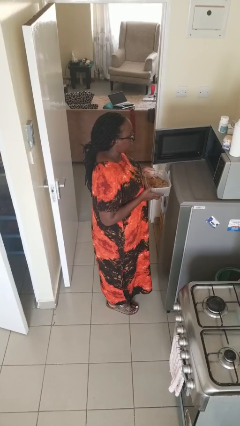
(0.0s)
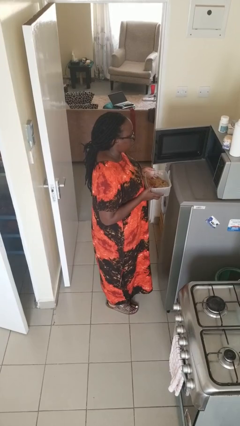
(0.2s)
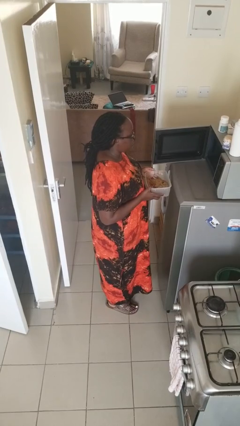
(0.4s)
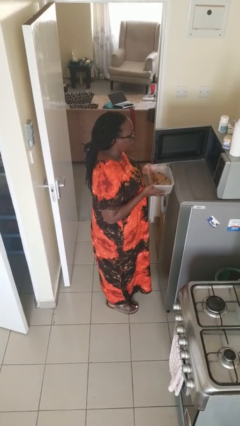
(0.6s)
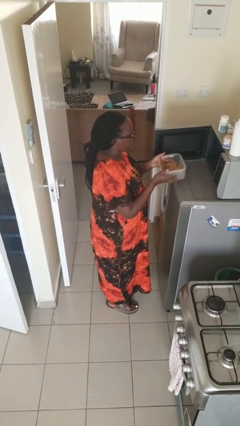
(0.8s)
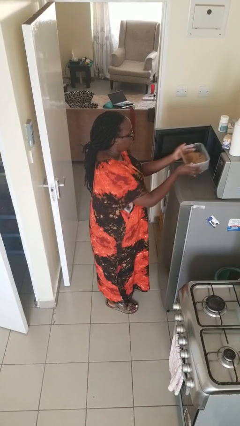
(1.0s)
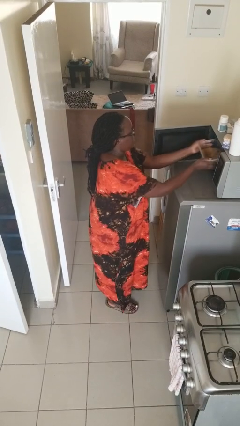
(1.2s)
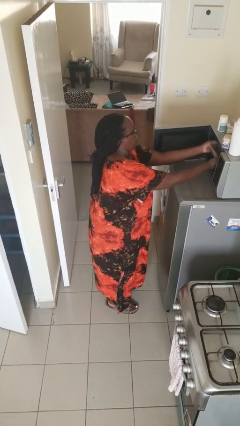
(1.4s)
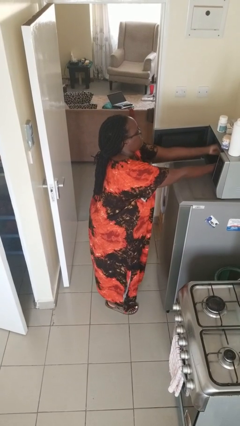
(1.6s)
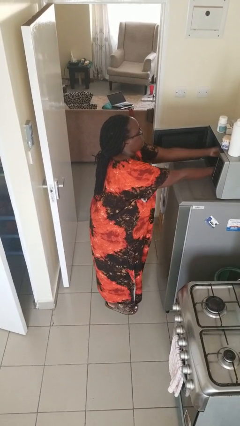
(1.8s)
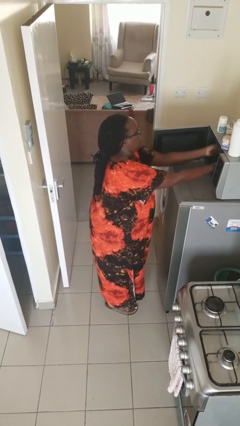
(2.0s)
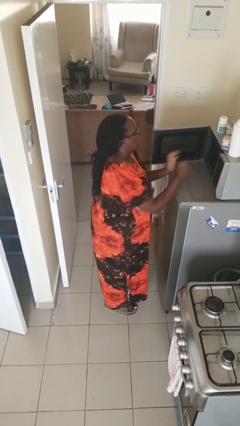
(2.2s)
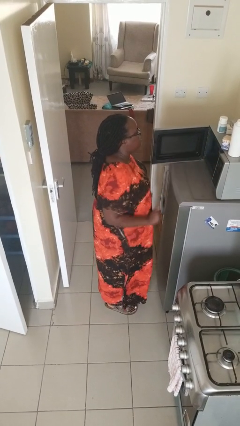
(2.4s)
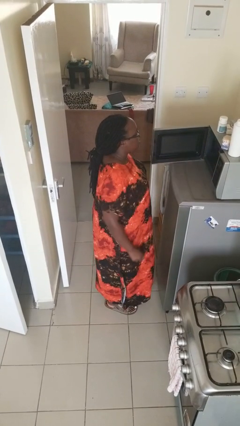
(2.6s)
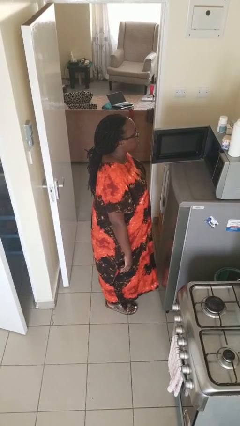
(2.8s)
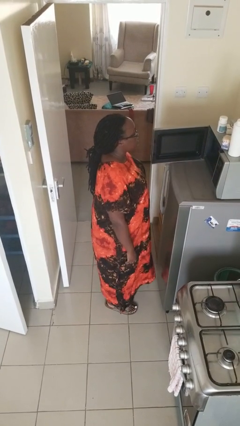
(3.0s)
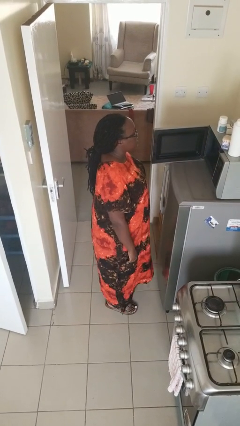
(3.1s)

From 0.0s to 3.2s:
person puts object into microwave

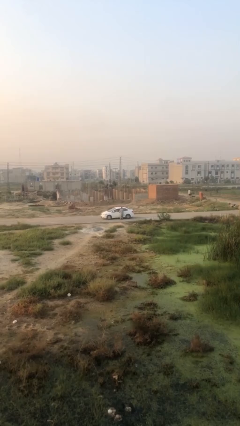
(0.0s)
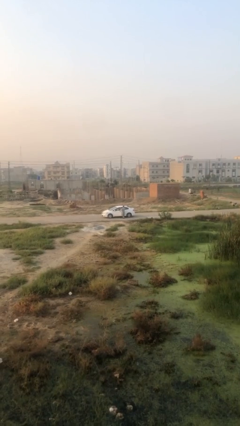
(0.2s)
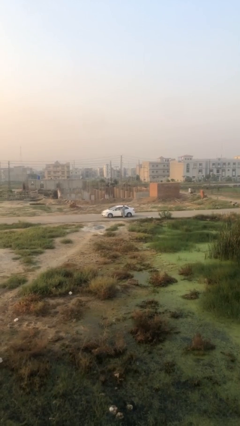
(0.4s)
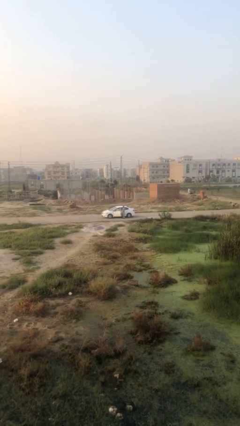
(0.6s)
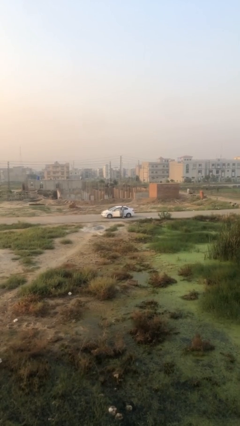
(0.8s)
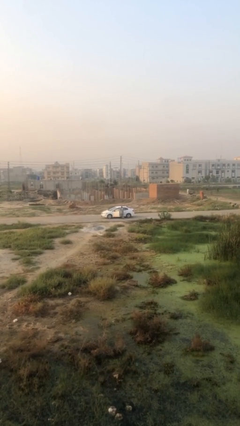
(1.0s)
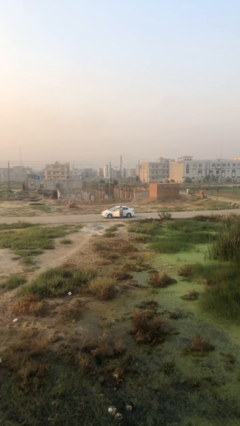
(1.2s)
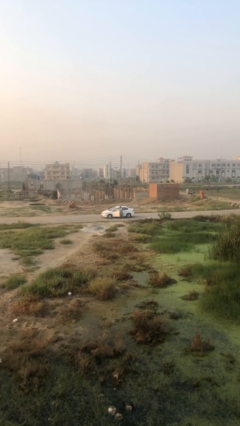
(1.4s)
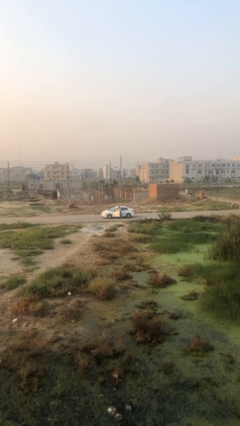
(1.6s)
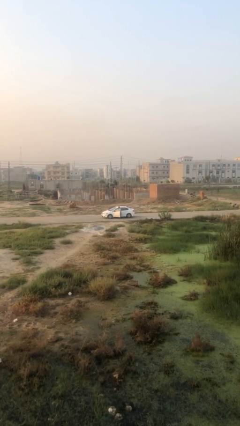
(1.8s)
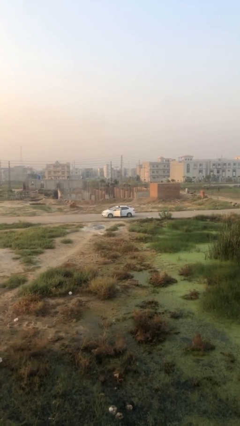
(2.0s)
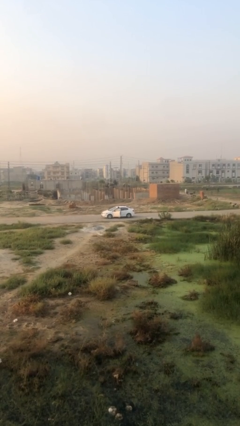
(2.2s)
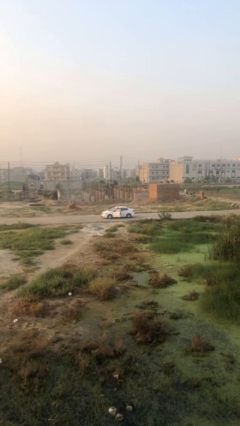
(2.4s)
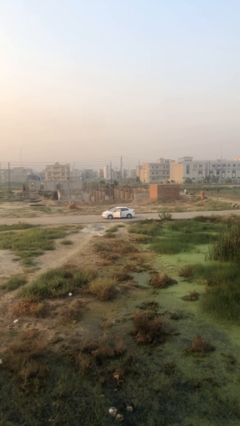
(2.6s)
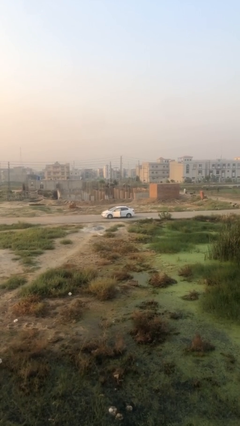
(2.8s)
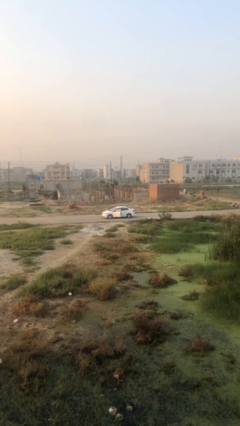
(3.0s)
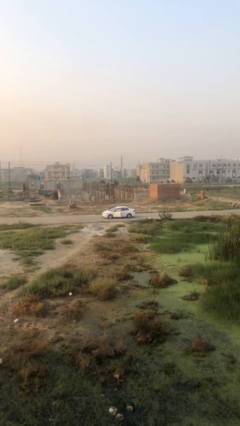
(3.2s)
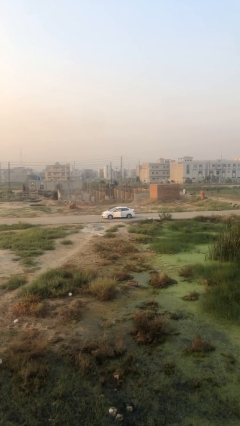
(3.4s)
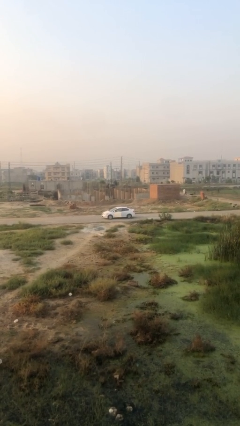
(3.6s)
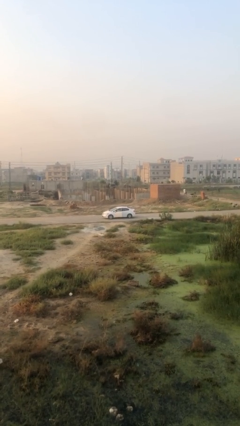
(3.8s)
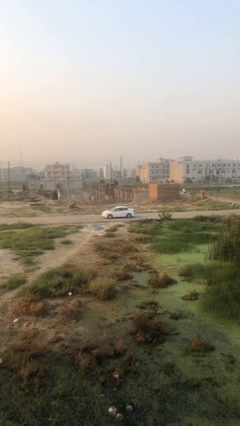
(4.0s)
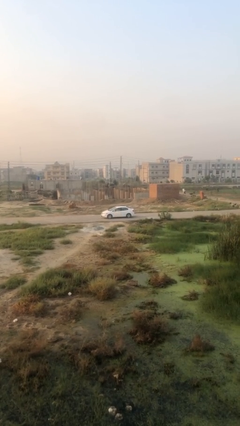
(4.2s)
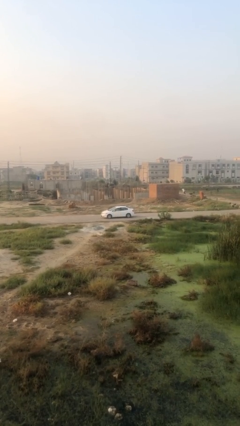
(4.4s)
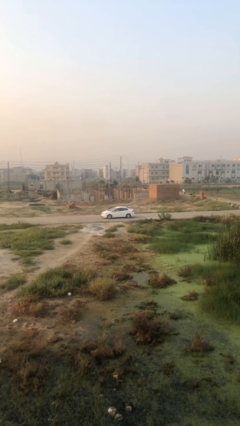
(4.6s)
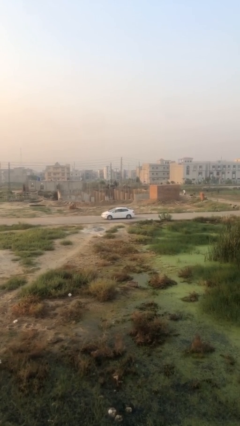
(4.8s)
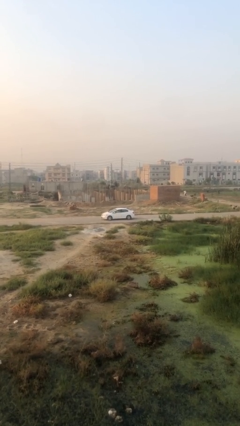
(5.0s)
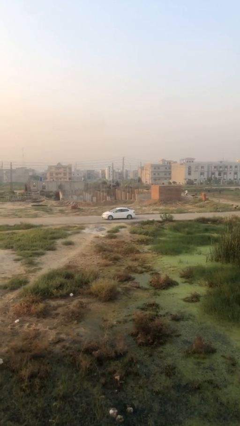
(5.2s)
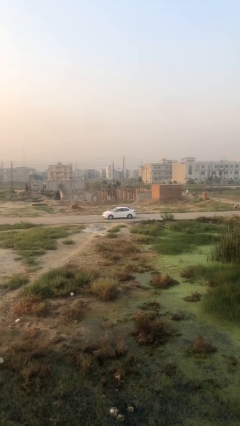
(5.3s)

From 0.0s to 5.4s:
car picks up person

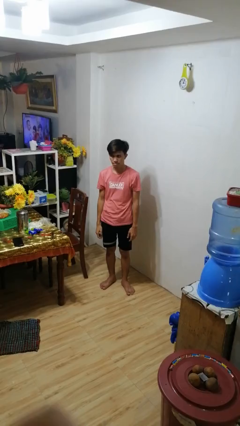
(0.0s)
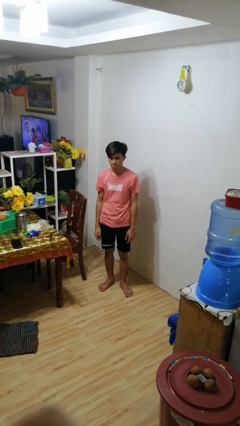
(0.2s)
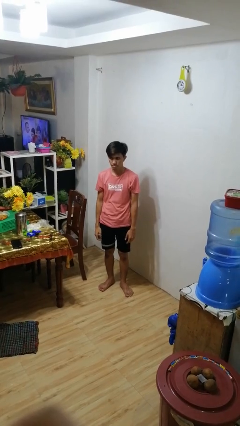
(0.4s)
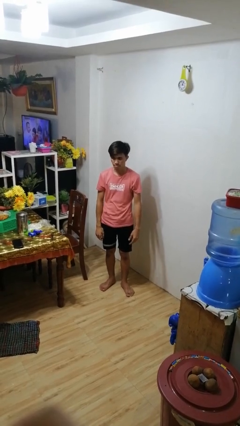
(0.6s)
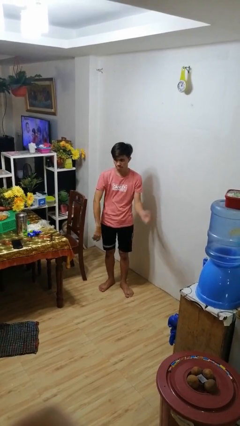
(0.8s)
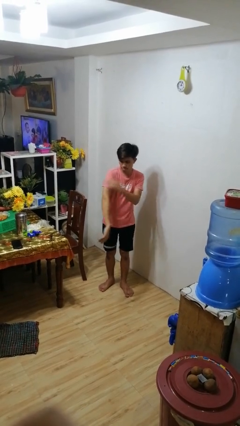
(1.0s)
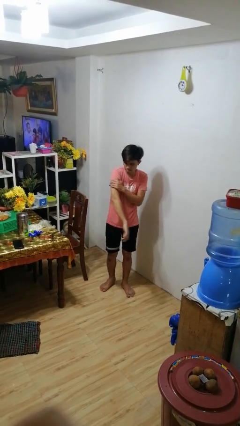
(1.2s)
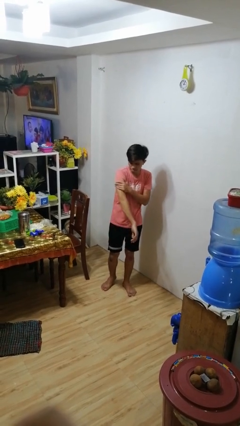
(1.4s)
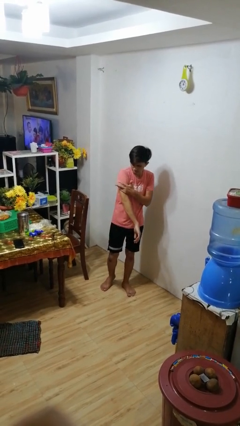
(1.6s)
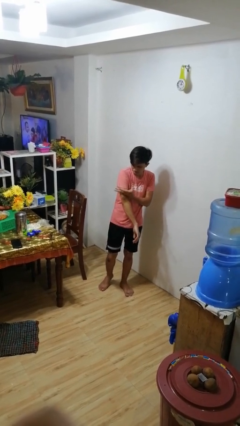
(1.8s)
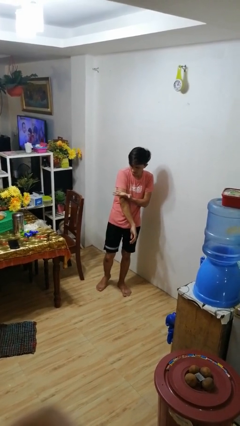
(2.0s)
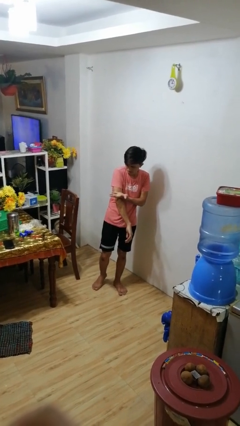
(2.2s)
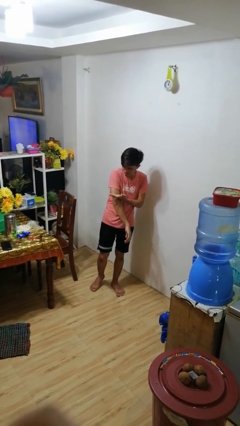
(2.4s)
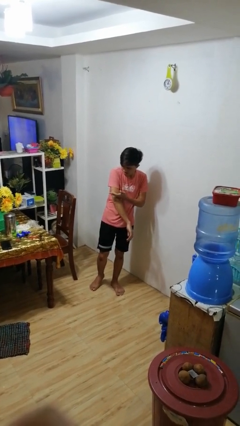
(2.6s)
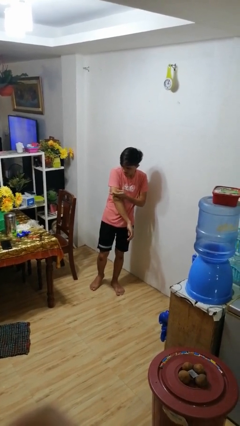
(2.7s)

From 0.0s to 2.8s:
person swats bug

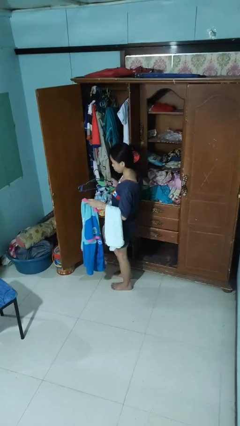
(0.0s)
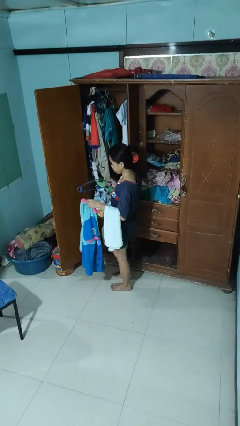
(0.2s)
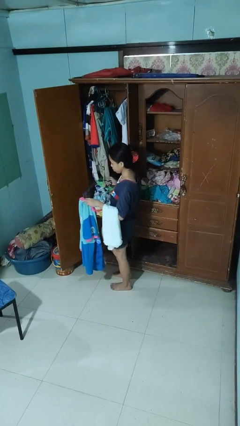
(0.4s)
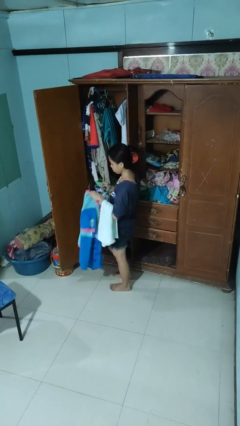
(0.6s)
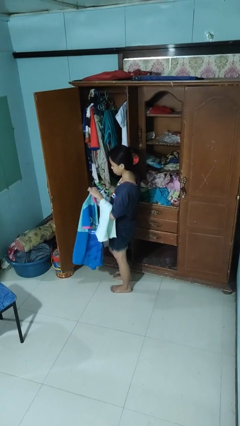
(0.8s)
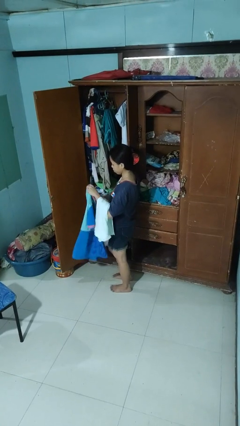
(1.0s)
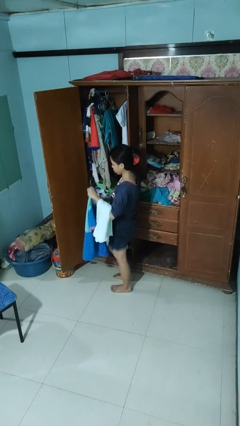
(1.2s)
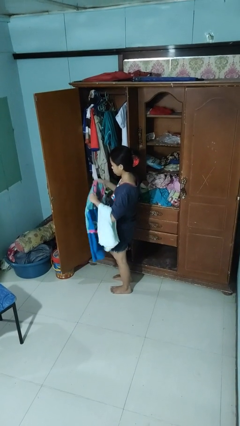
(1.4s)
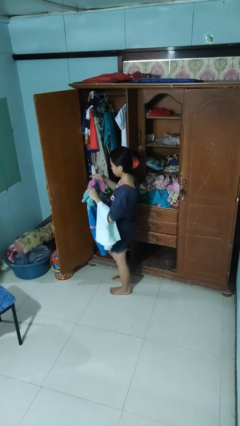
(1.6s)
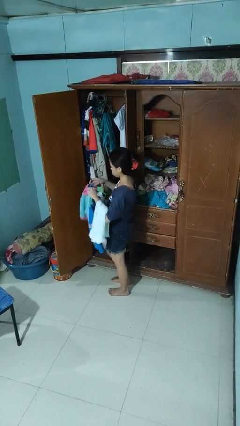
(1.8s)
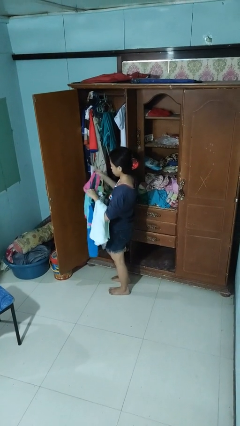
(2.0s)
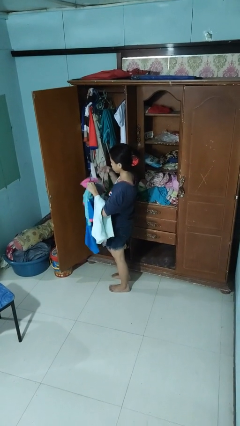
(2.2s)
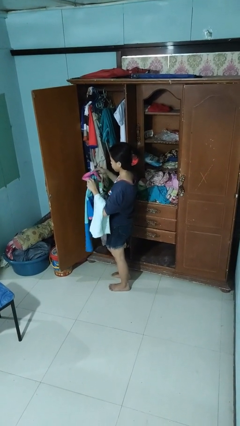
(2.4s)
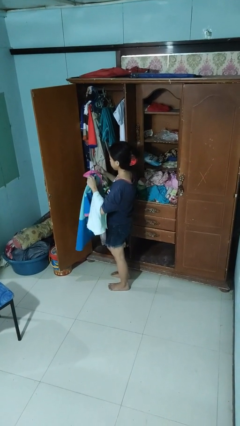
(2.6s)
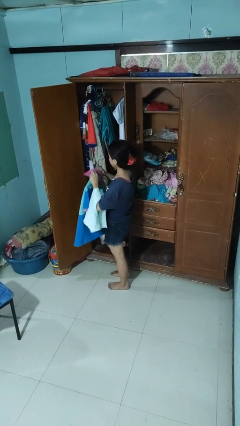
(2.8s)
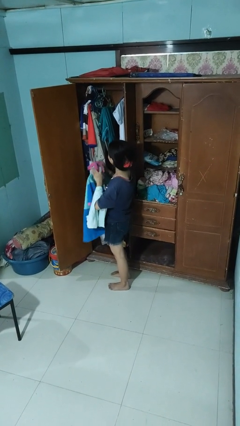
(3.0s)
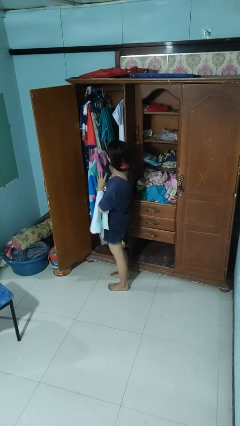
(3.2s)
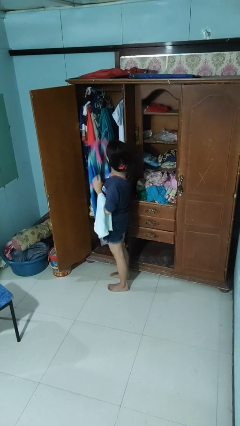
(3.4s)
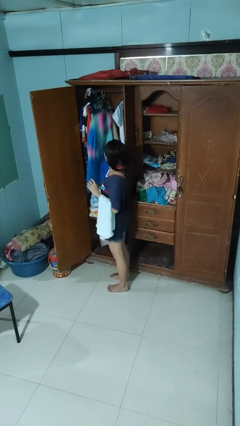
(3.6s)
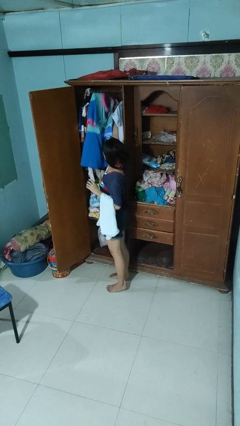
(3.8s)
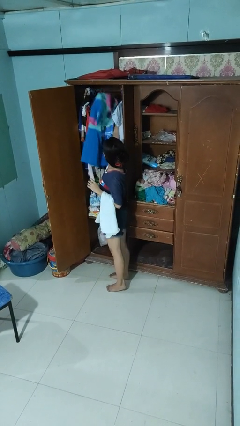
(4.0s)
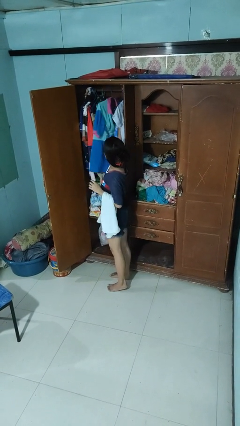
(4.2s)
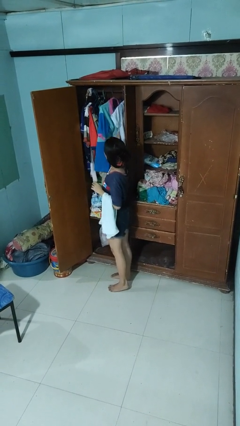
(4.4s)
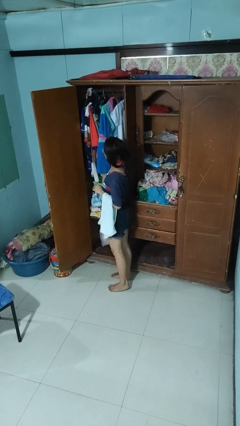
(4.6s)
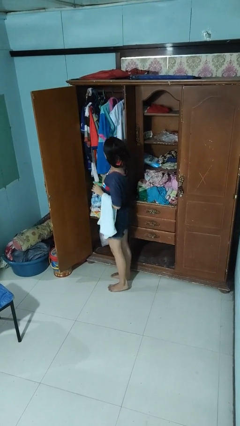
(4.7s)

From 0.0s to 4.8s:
person puts clothes into closet

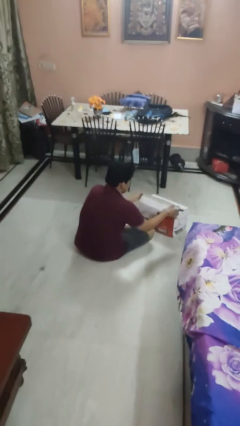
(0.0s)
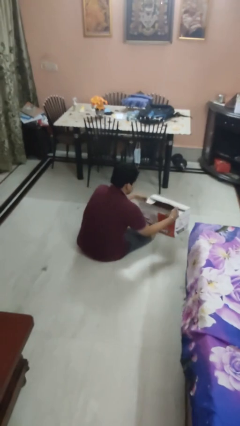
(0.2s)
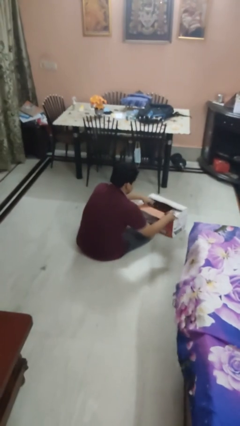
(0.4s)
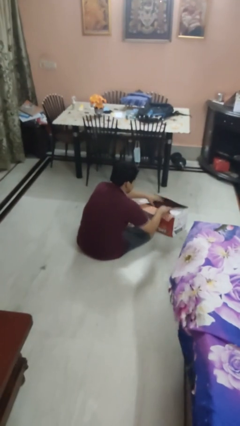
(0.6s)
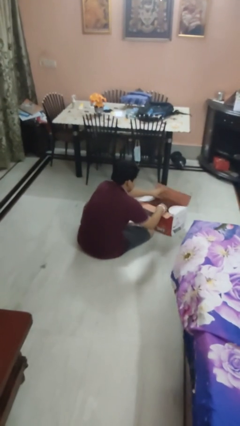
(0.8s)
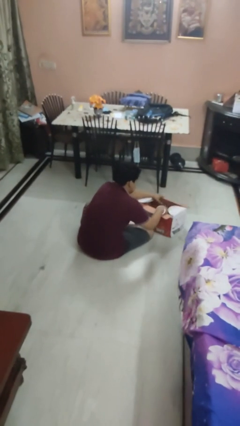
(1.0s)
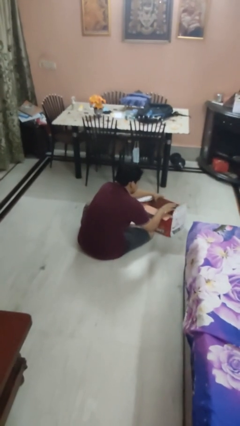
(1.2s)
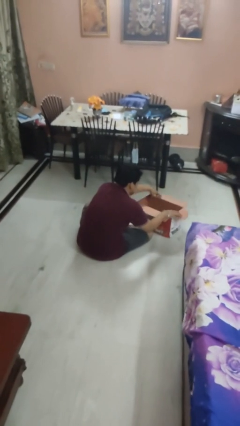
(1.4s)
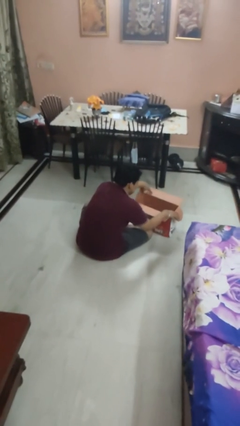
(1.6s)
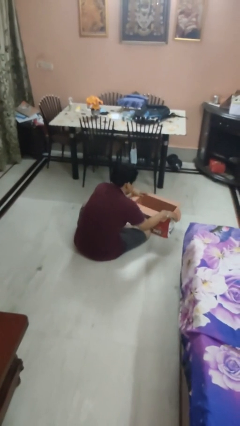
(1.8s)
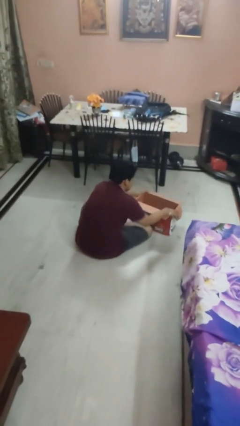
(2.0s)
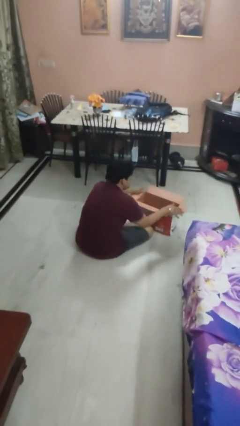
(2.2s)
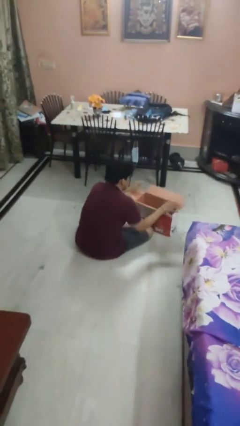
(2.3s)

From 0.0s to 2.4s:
person opens box
